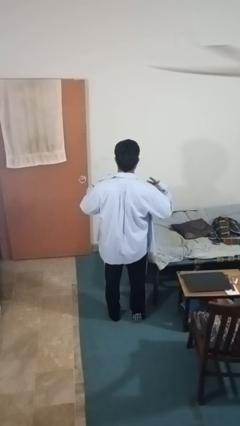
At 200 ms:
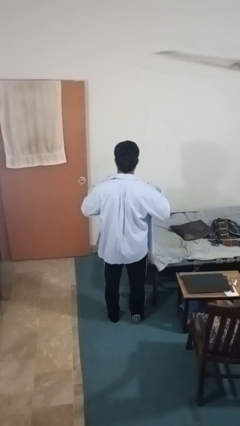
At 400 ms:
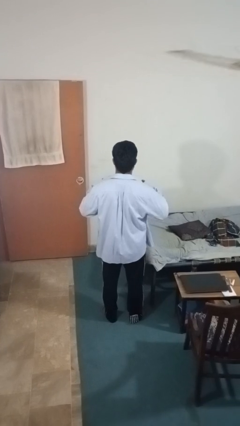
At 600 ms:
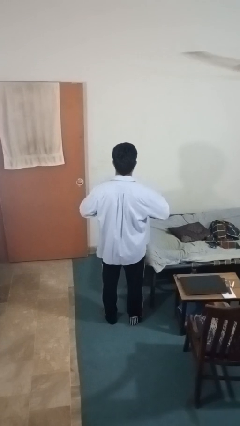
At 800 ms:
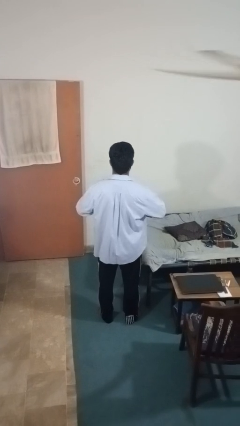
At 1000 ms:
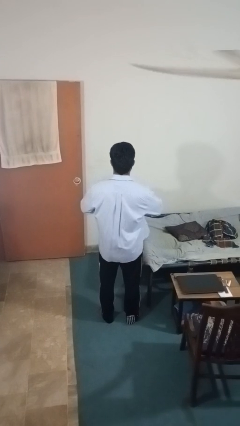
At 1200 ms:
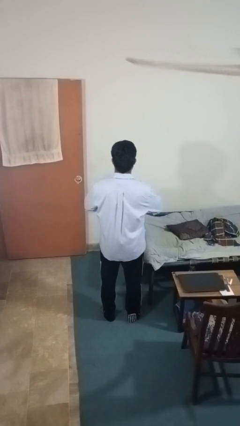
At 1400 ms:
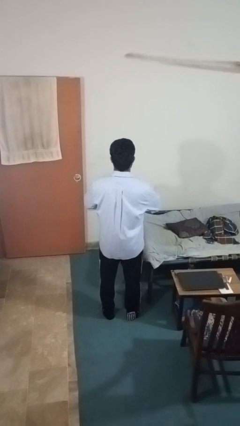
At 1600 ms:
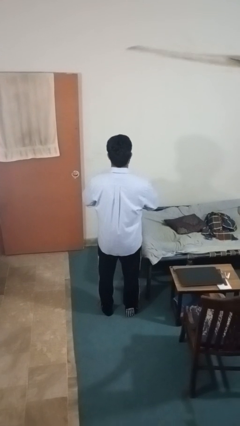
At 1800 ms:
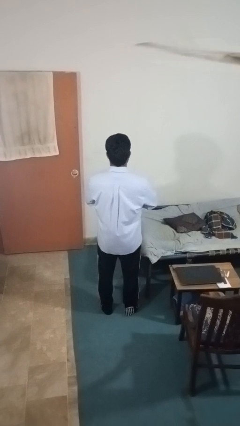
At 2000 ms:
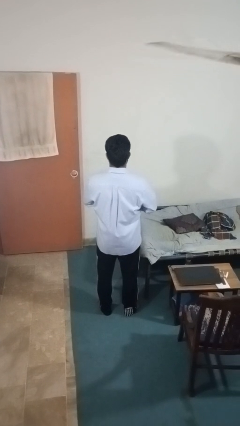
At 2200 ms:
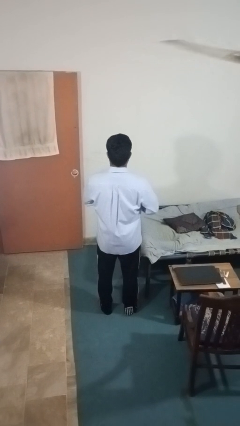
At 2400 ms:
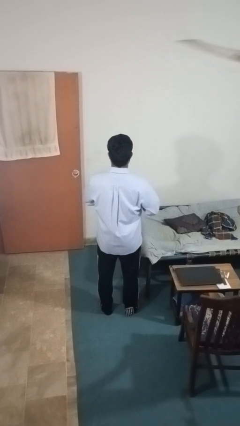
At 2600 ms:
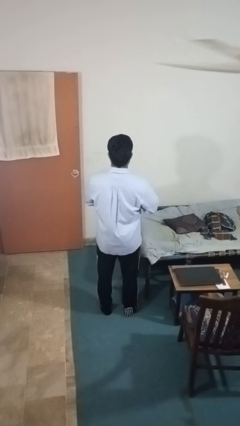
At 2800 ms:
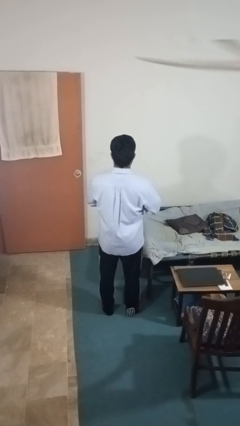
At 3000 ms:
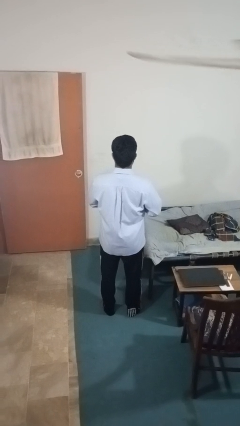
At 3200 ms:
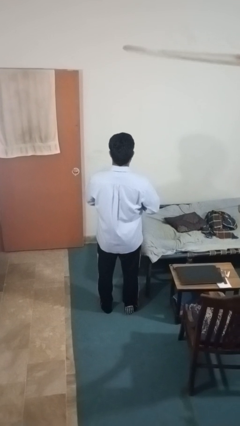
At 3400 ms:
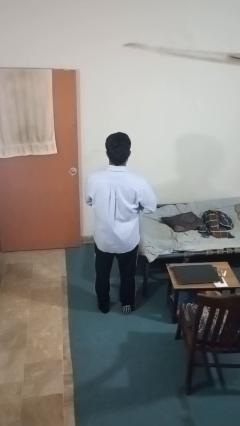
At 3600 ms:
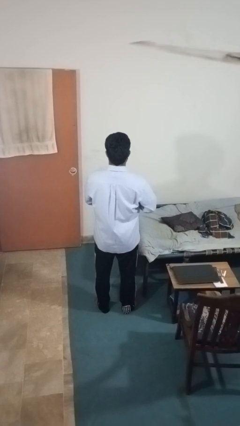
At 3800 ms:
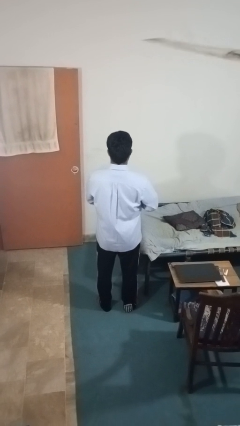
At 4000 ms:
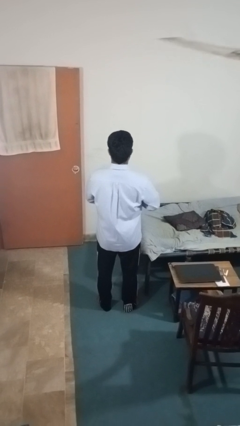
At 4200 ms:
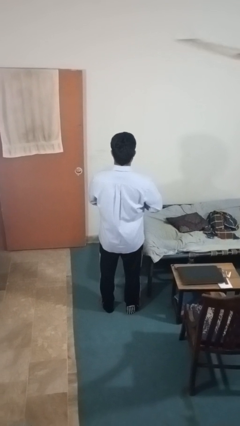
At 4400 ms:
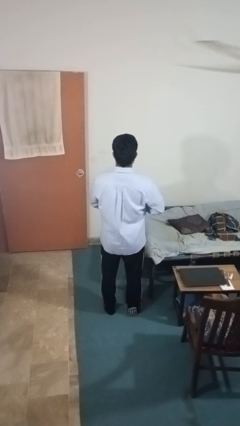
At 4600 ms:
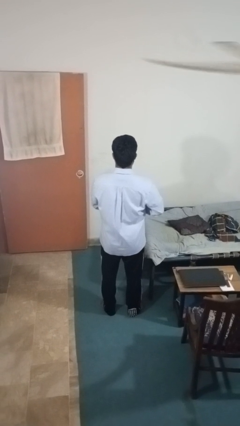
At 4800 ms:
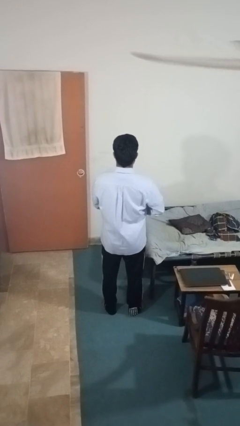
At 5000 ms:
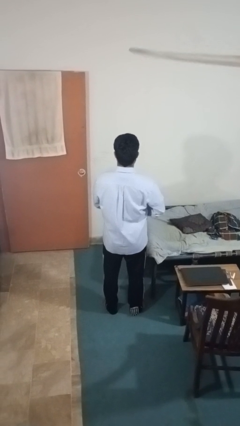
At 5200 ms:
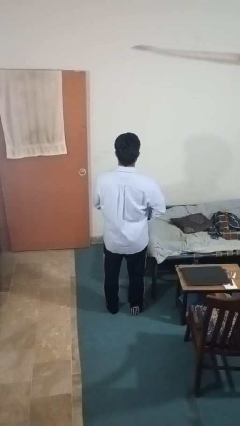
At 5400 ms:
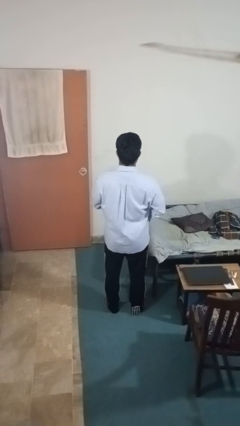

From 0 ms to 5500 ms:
person buttons shirt

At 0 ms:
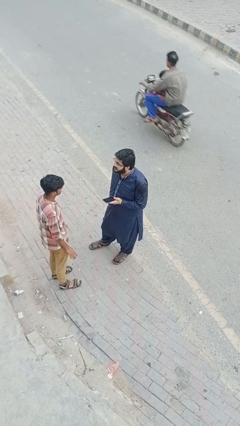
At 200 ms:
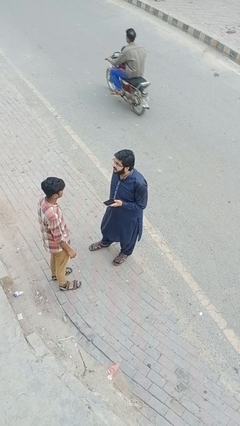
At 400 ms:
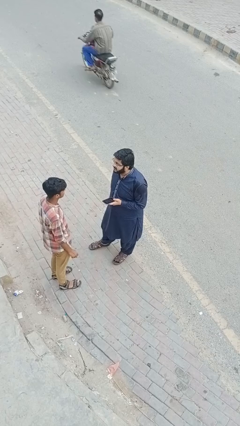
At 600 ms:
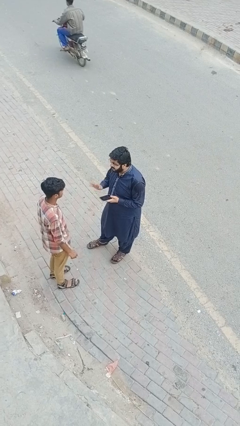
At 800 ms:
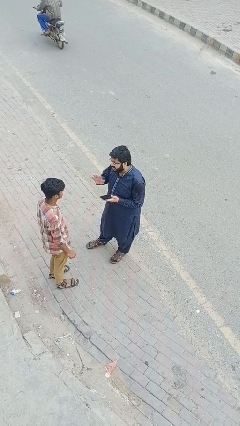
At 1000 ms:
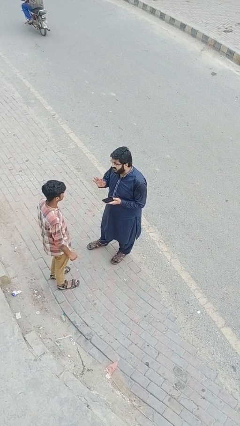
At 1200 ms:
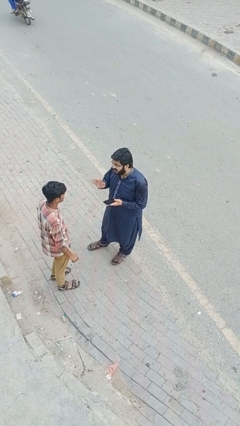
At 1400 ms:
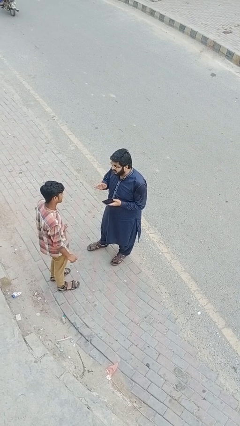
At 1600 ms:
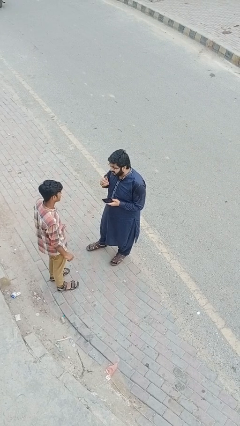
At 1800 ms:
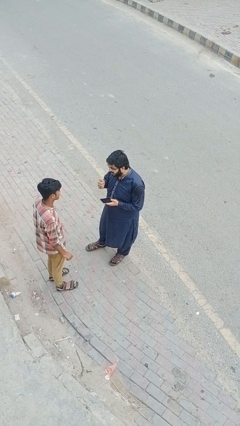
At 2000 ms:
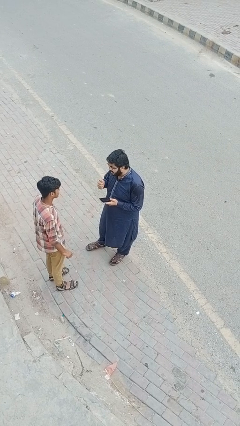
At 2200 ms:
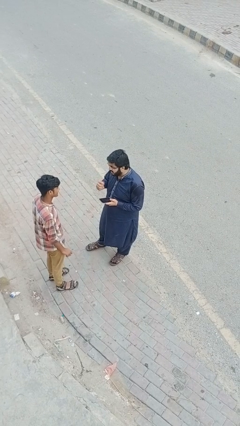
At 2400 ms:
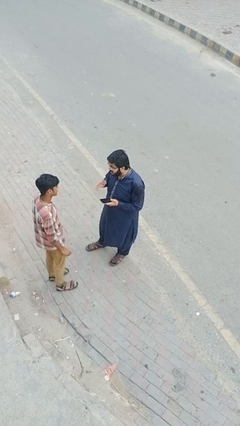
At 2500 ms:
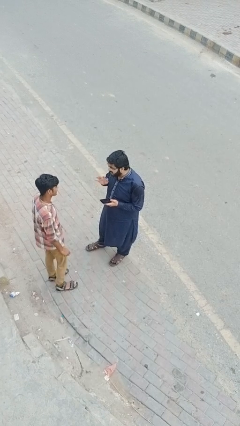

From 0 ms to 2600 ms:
person talks to person

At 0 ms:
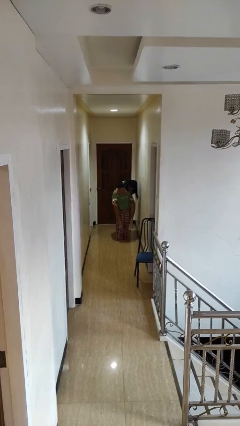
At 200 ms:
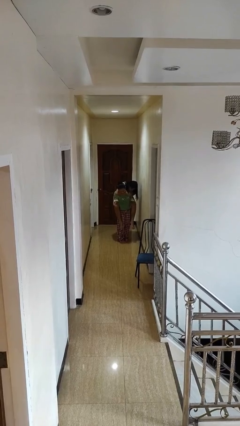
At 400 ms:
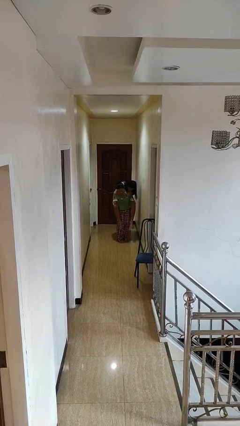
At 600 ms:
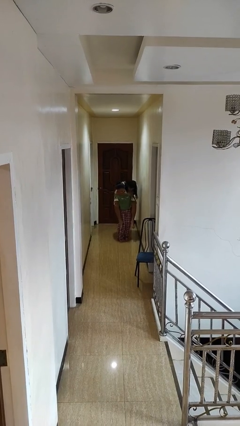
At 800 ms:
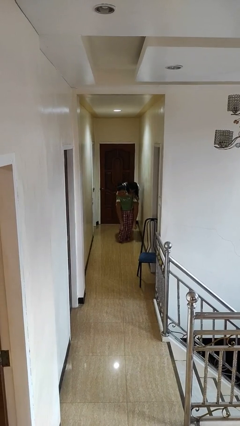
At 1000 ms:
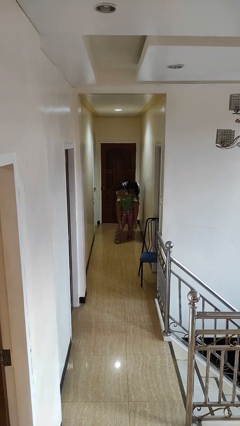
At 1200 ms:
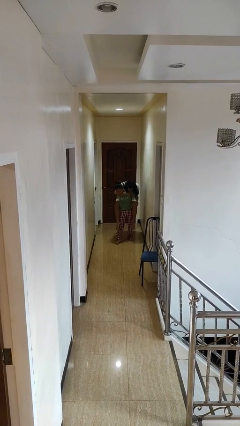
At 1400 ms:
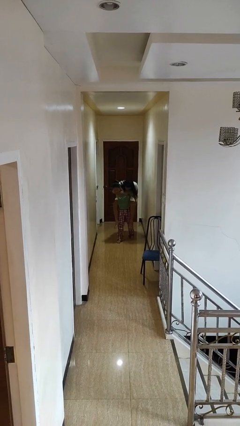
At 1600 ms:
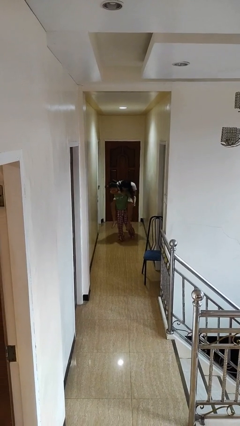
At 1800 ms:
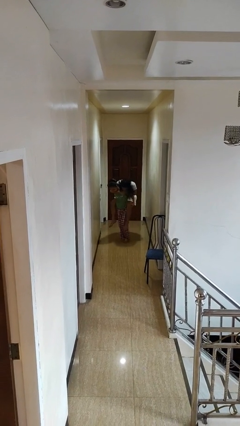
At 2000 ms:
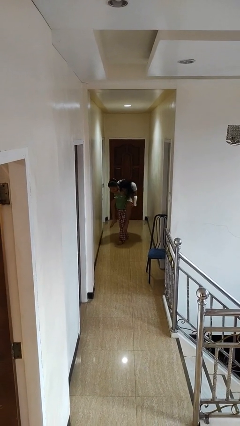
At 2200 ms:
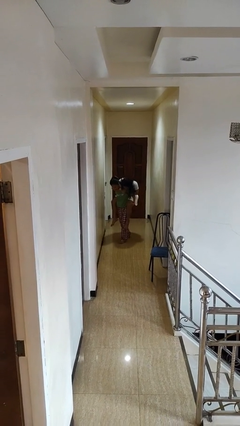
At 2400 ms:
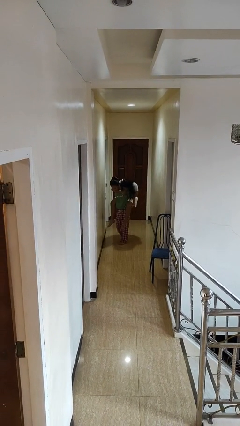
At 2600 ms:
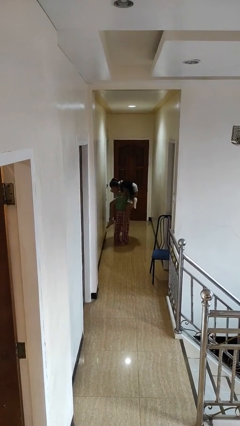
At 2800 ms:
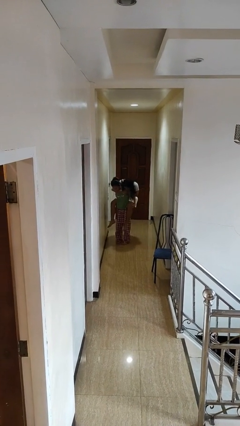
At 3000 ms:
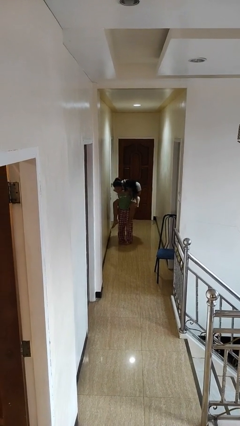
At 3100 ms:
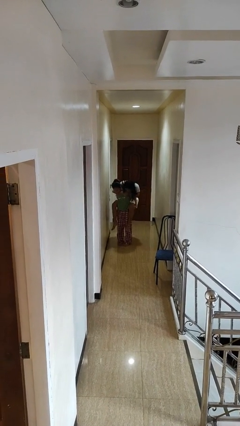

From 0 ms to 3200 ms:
person carries person on back

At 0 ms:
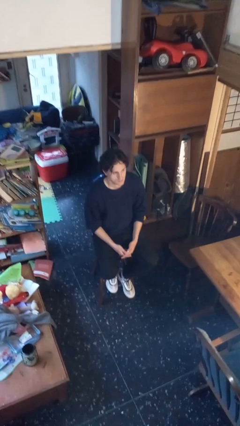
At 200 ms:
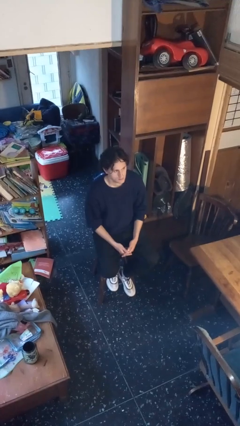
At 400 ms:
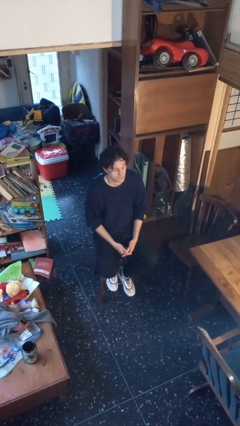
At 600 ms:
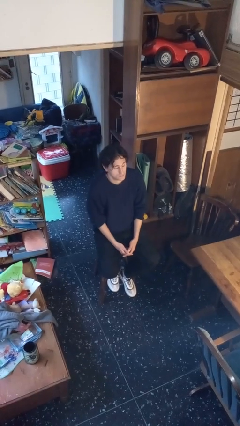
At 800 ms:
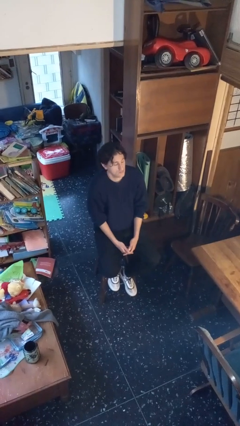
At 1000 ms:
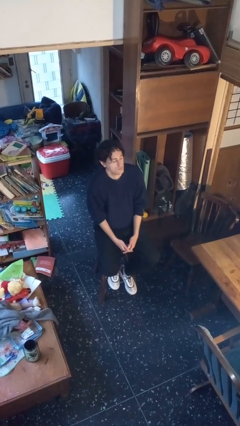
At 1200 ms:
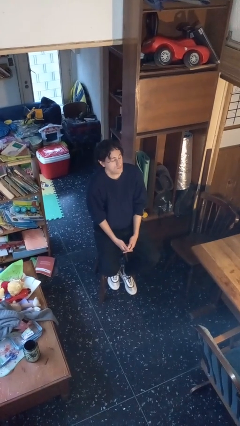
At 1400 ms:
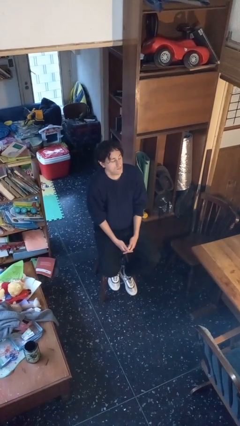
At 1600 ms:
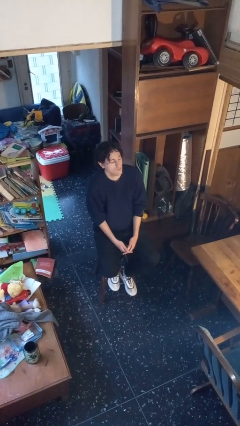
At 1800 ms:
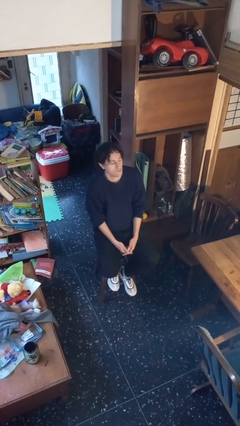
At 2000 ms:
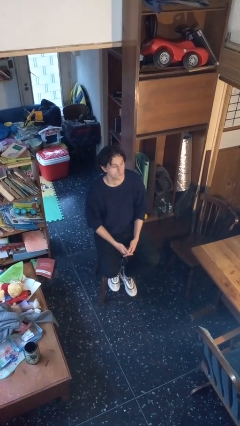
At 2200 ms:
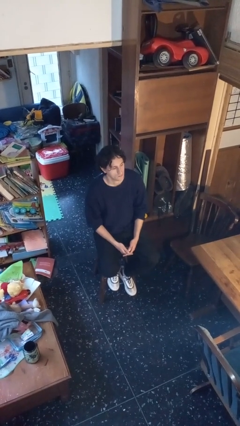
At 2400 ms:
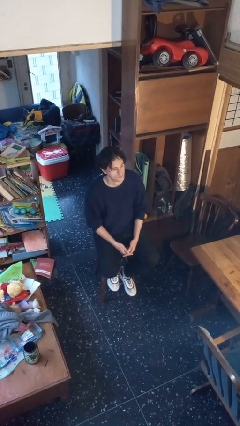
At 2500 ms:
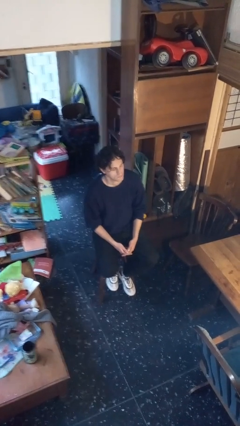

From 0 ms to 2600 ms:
person shrugs

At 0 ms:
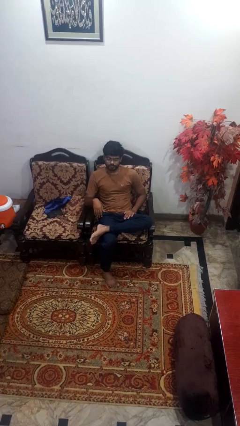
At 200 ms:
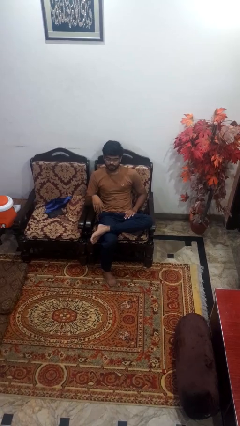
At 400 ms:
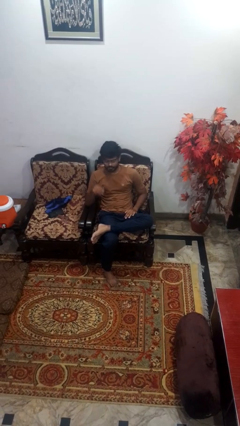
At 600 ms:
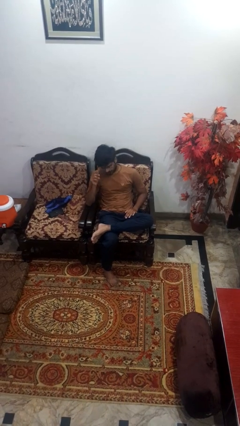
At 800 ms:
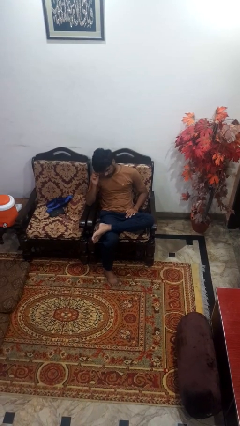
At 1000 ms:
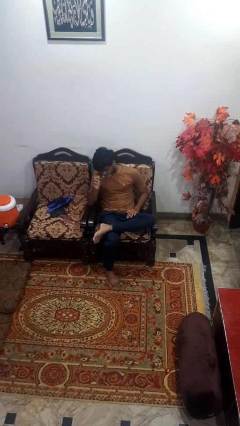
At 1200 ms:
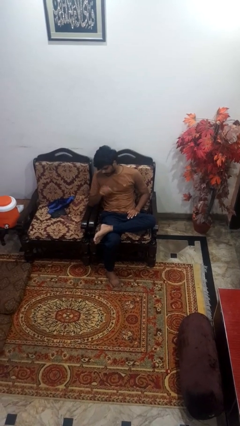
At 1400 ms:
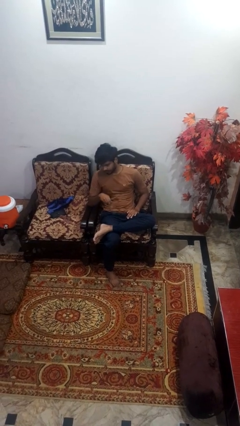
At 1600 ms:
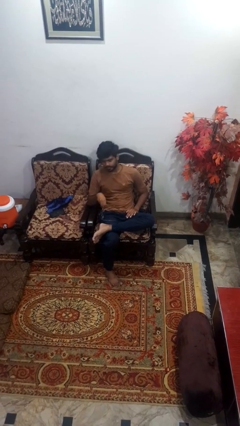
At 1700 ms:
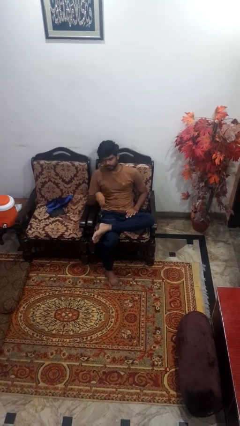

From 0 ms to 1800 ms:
person takes off glasses

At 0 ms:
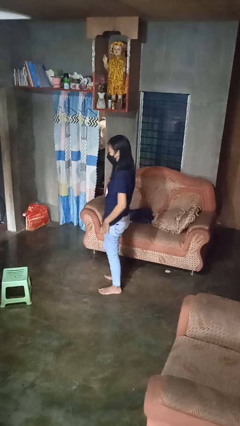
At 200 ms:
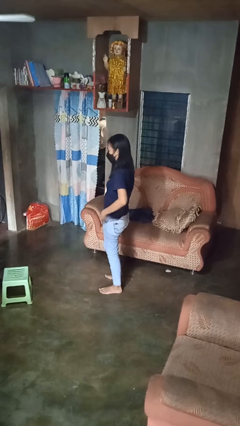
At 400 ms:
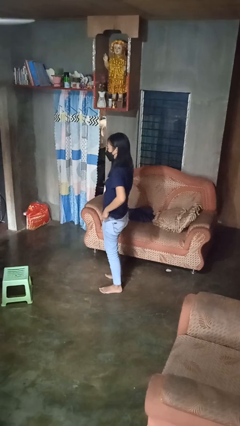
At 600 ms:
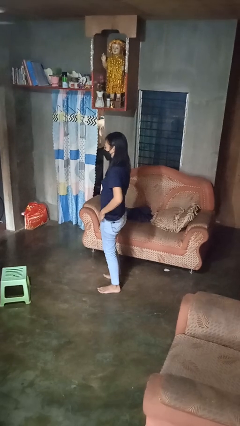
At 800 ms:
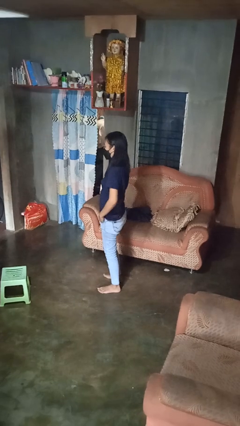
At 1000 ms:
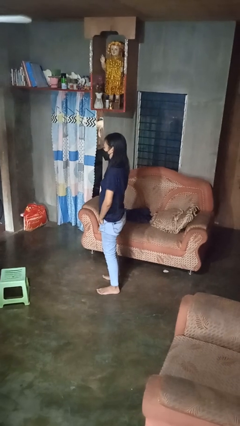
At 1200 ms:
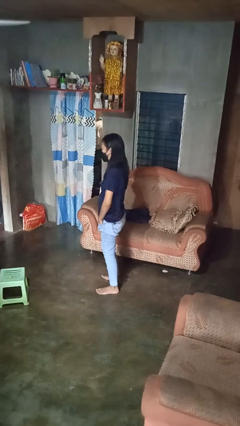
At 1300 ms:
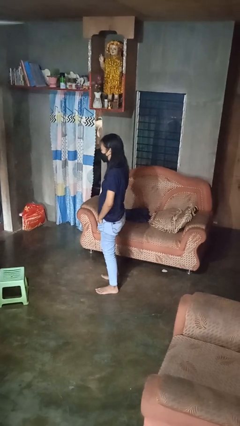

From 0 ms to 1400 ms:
person puts hands in back pockets

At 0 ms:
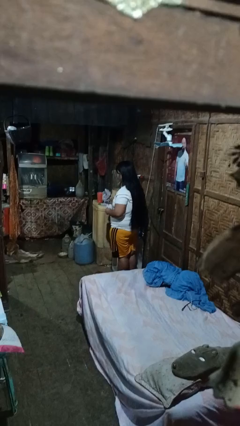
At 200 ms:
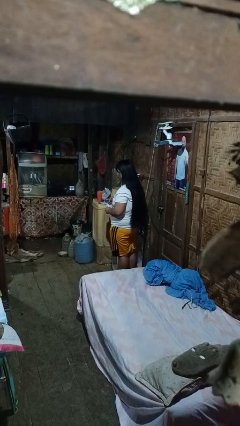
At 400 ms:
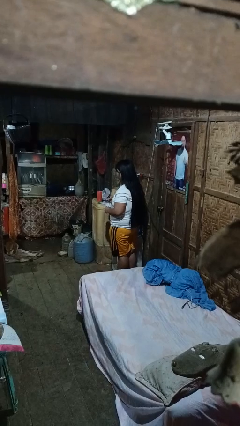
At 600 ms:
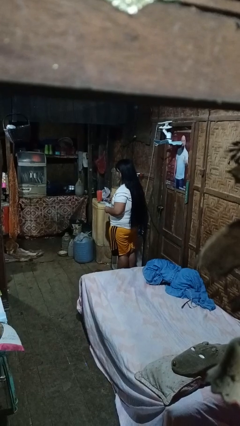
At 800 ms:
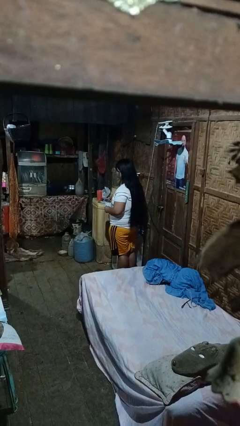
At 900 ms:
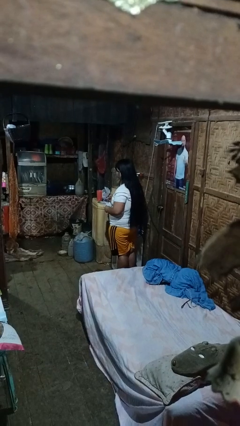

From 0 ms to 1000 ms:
person stirs mug
